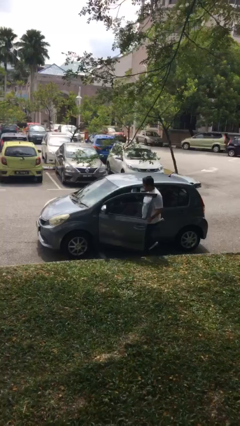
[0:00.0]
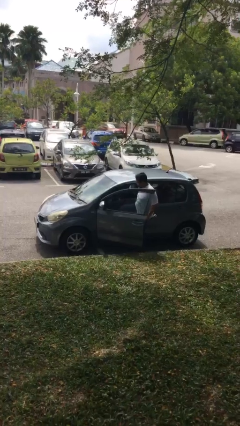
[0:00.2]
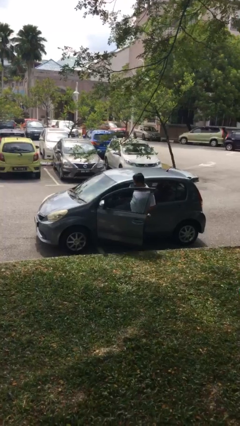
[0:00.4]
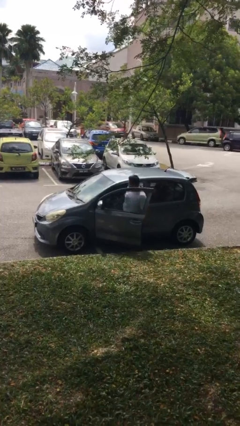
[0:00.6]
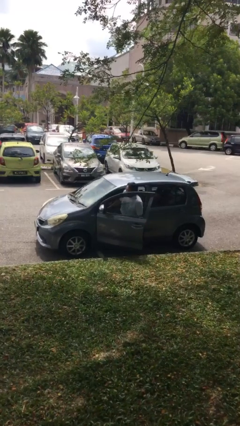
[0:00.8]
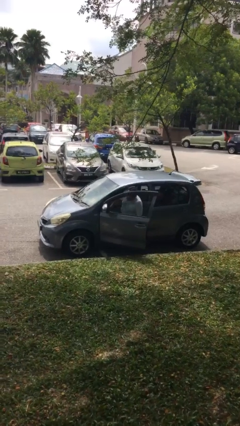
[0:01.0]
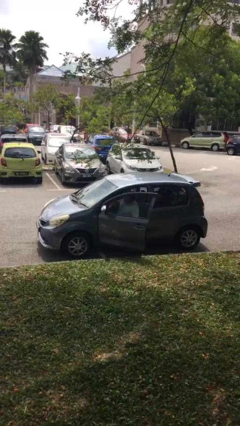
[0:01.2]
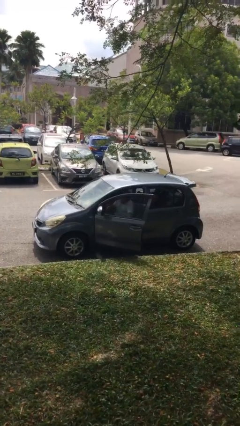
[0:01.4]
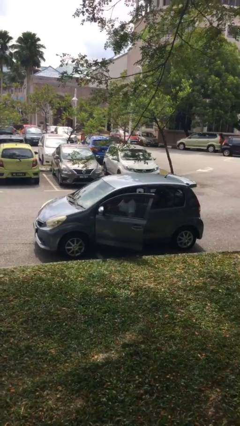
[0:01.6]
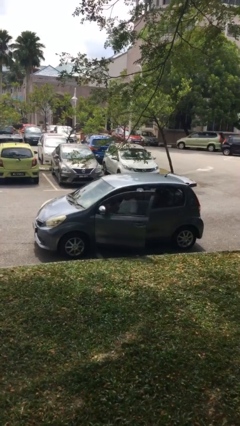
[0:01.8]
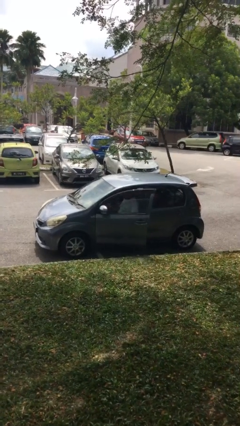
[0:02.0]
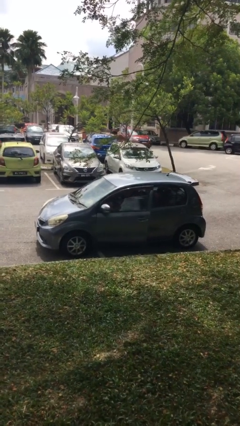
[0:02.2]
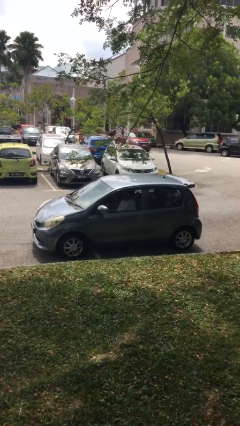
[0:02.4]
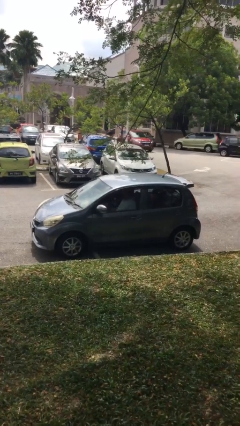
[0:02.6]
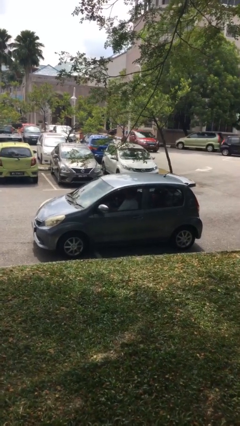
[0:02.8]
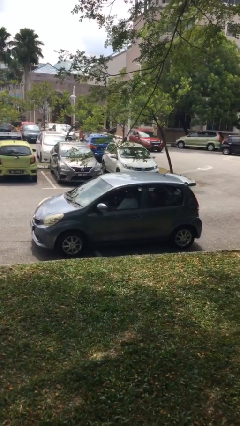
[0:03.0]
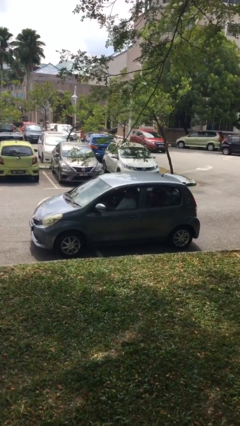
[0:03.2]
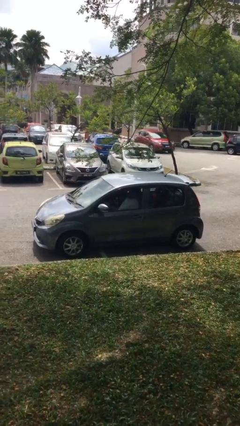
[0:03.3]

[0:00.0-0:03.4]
car picks up person

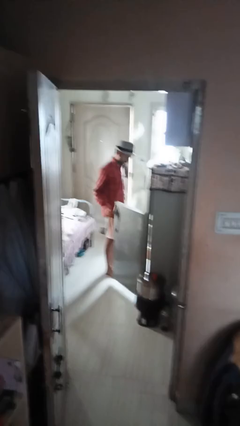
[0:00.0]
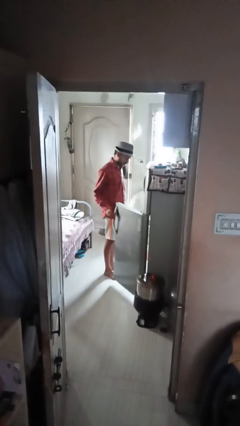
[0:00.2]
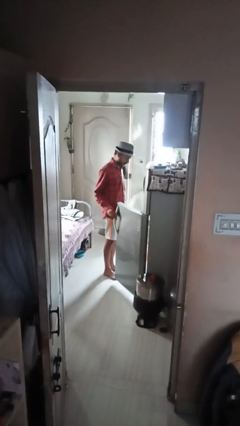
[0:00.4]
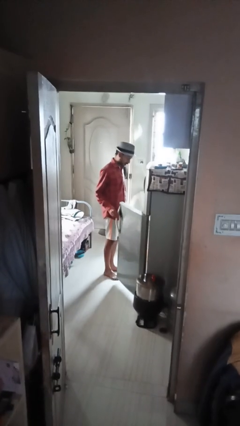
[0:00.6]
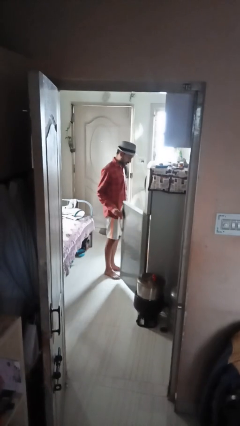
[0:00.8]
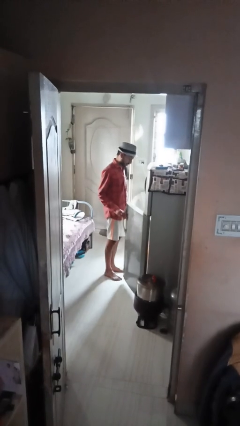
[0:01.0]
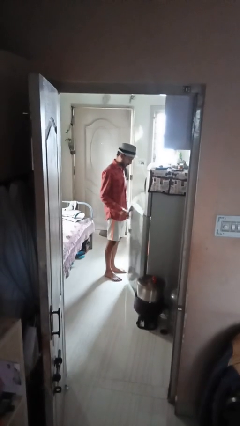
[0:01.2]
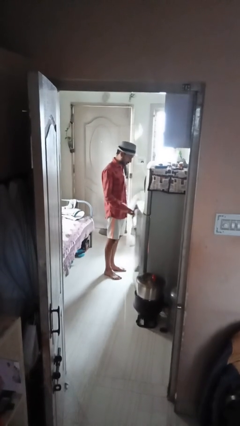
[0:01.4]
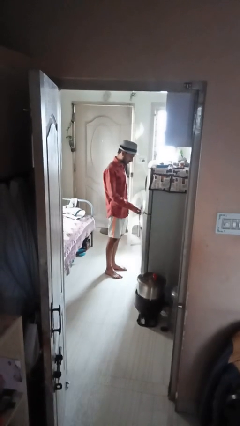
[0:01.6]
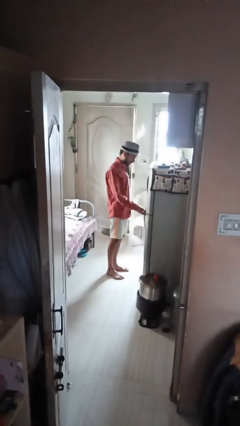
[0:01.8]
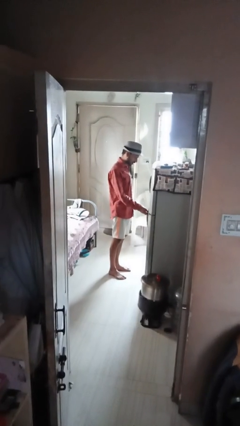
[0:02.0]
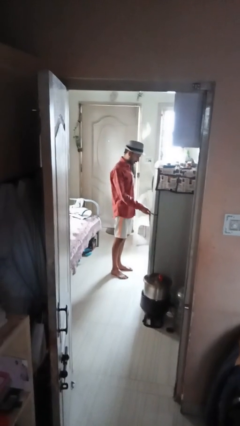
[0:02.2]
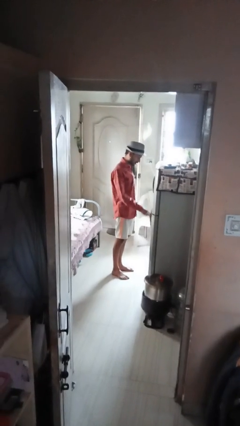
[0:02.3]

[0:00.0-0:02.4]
person closes refrigerator

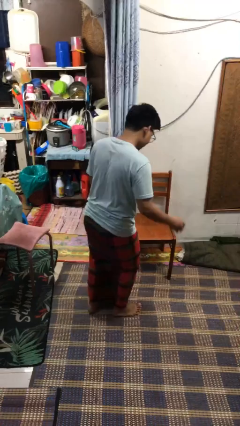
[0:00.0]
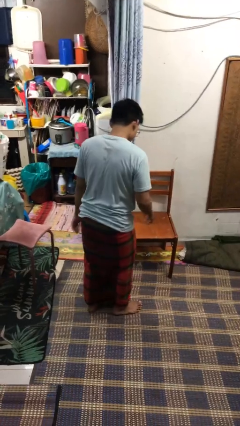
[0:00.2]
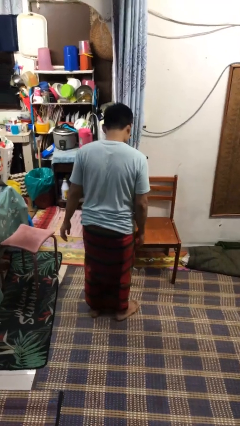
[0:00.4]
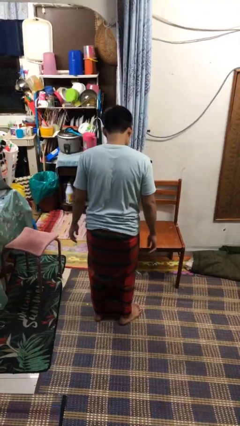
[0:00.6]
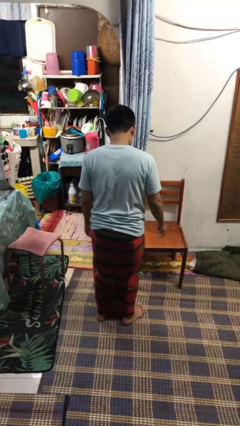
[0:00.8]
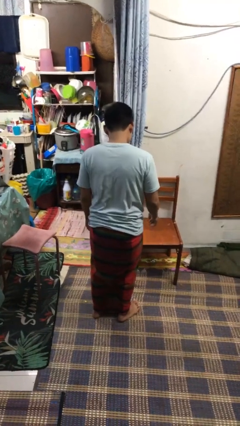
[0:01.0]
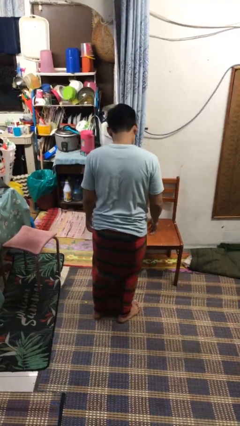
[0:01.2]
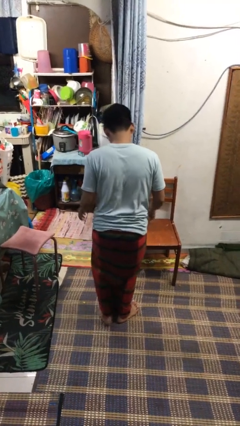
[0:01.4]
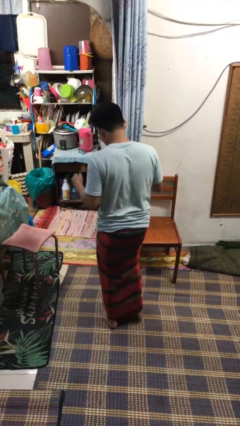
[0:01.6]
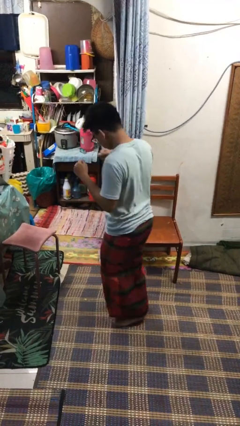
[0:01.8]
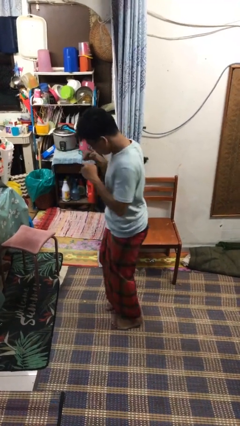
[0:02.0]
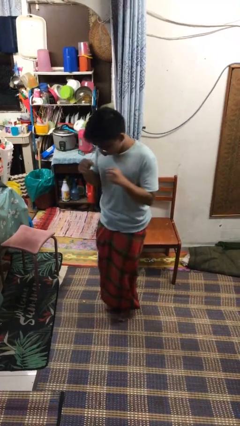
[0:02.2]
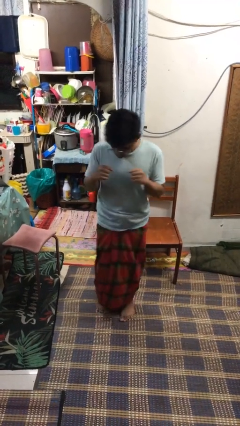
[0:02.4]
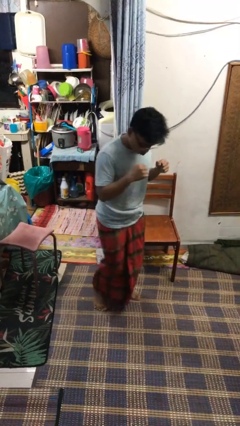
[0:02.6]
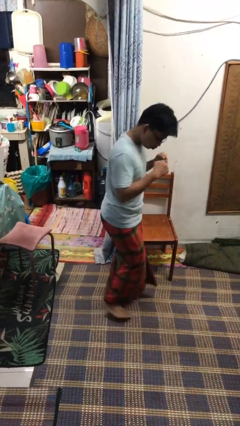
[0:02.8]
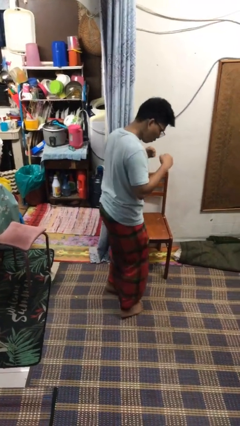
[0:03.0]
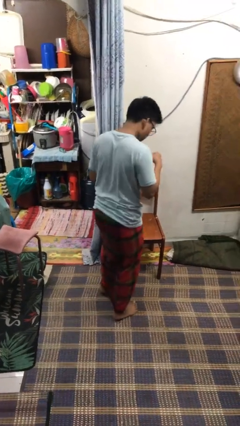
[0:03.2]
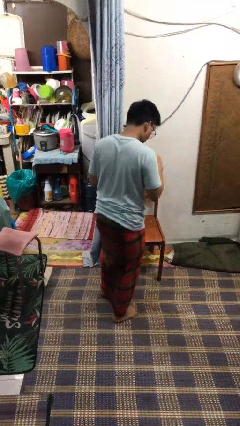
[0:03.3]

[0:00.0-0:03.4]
person twirls

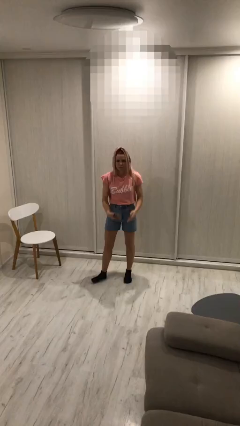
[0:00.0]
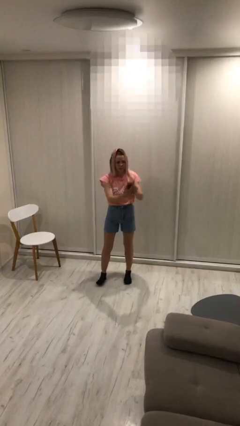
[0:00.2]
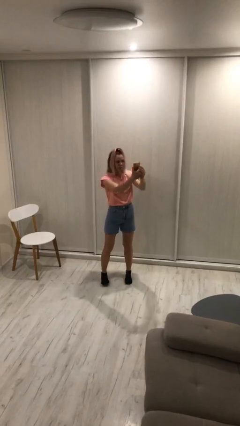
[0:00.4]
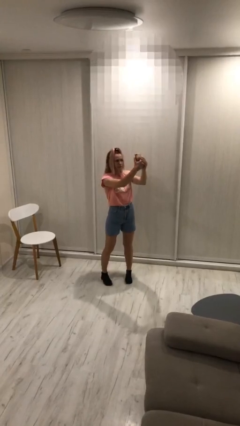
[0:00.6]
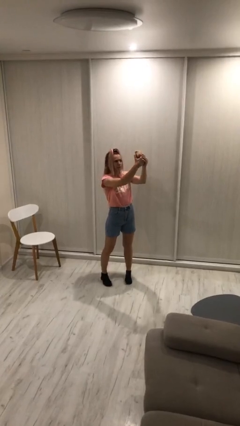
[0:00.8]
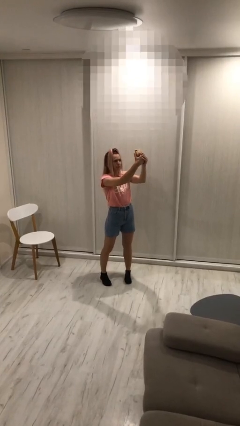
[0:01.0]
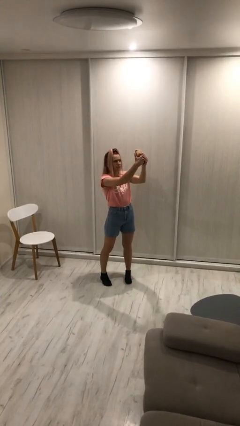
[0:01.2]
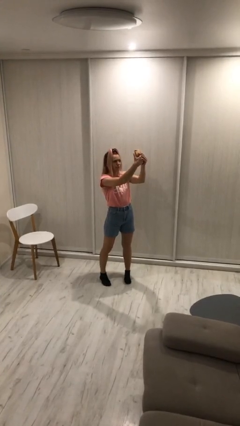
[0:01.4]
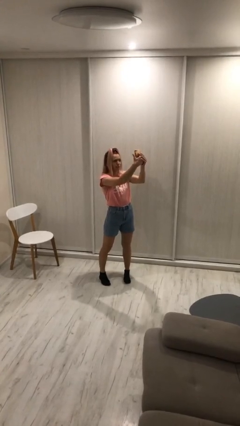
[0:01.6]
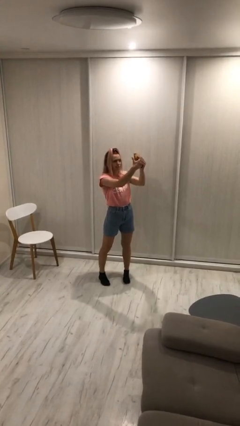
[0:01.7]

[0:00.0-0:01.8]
person takes selfie

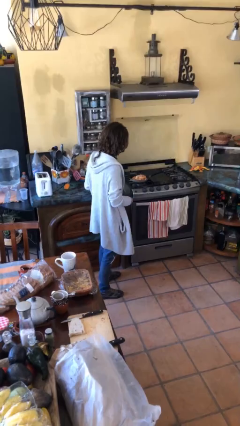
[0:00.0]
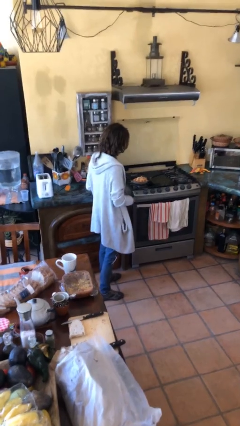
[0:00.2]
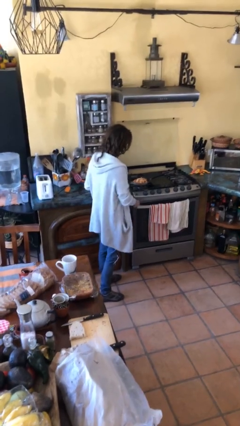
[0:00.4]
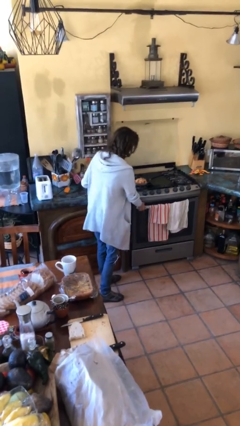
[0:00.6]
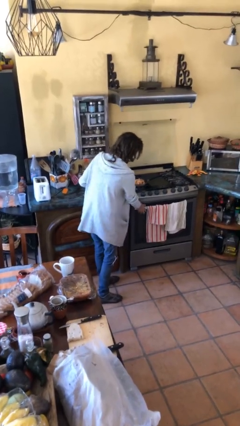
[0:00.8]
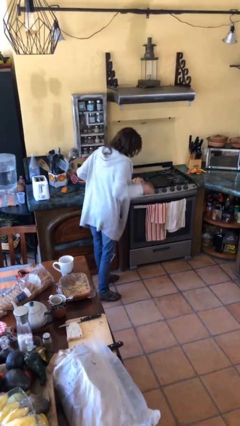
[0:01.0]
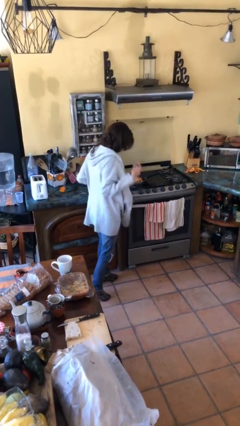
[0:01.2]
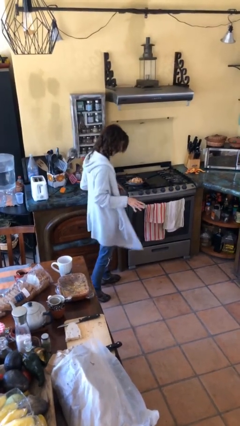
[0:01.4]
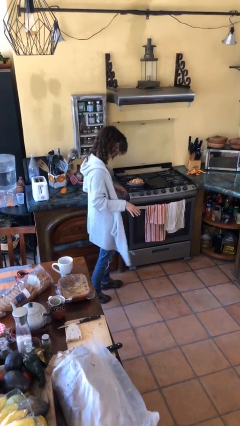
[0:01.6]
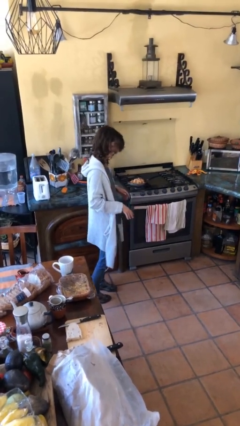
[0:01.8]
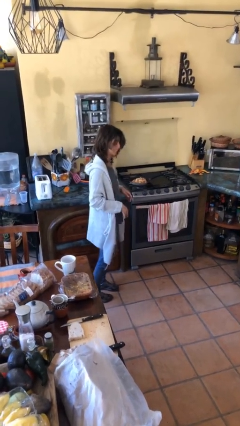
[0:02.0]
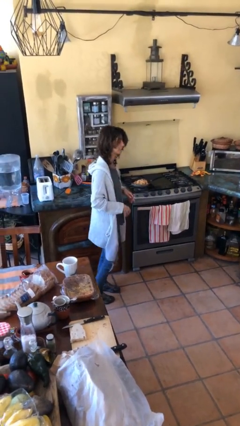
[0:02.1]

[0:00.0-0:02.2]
person burns hand

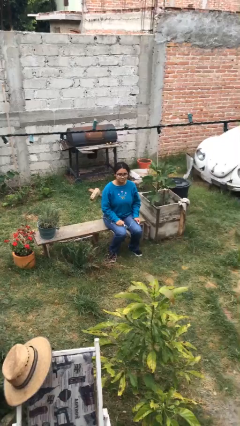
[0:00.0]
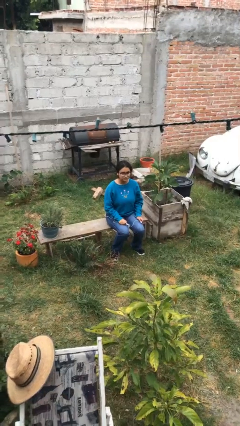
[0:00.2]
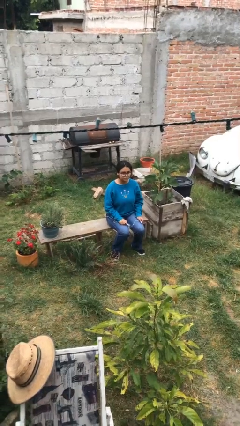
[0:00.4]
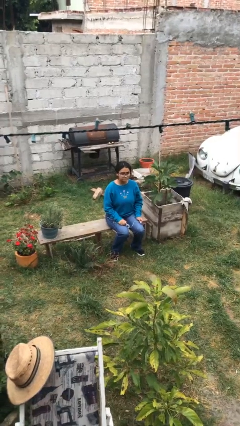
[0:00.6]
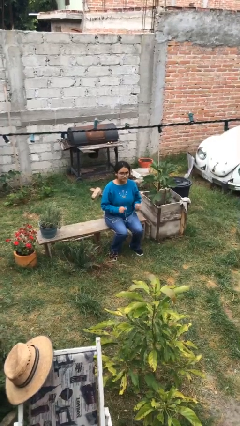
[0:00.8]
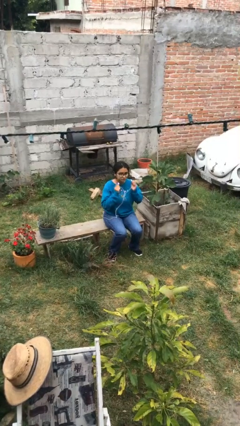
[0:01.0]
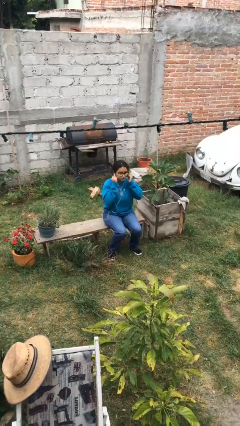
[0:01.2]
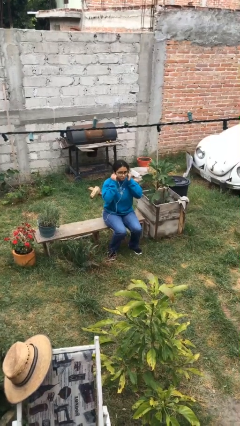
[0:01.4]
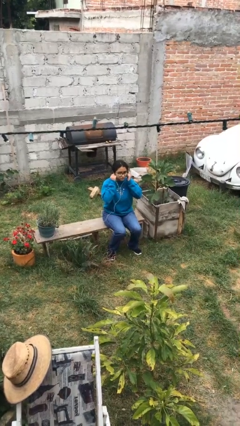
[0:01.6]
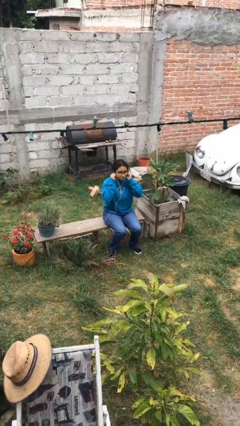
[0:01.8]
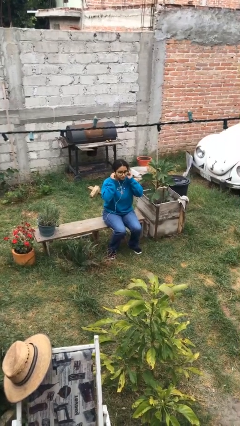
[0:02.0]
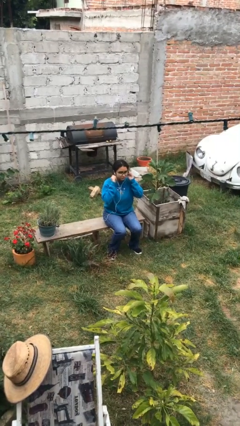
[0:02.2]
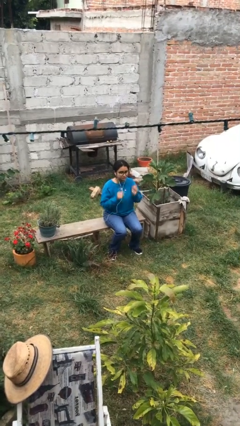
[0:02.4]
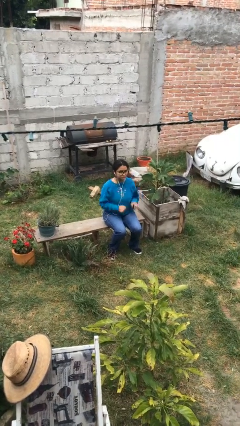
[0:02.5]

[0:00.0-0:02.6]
person puts on headphones

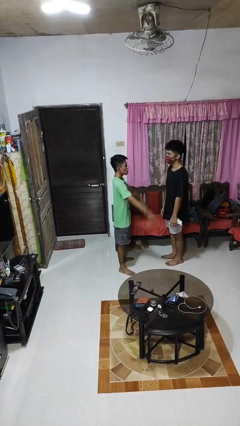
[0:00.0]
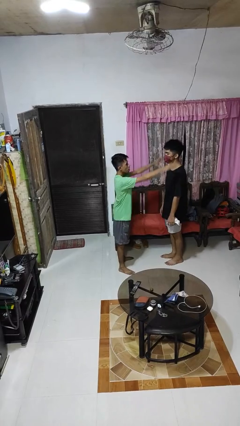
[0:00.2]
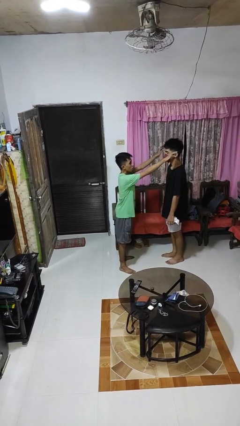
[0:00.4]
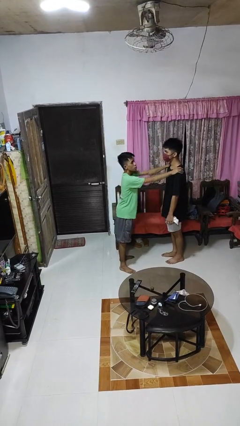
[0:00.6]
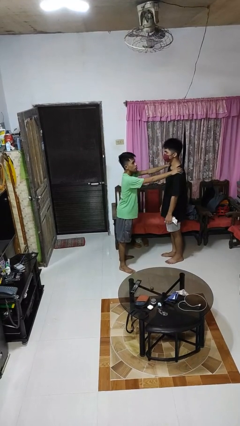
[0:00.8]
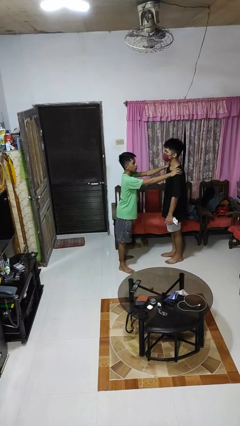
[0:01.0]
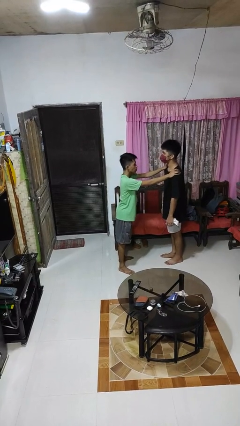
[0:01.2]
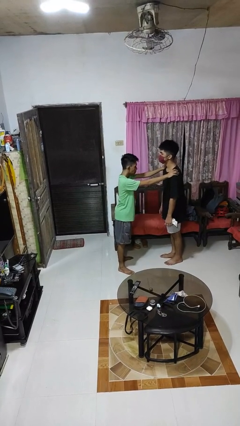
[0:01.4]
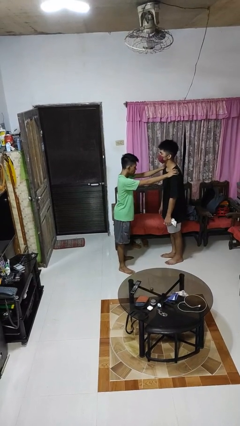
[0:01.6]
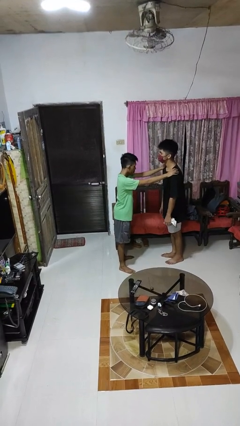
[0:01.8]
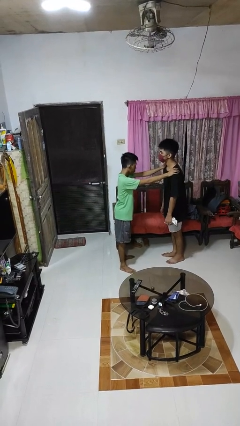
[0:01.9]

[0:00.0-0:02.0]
person grabs person by shoulder
